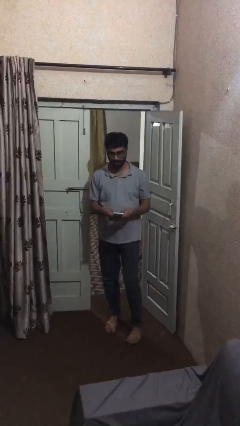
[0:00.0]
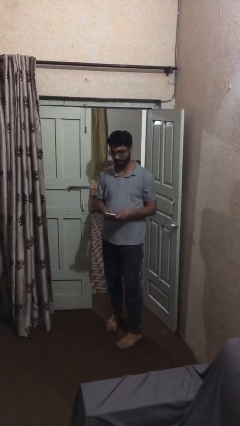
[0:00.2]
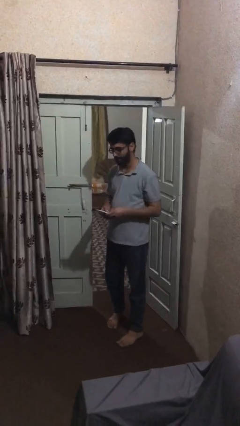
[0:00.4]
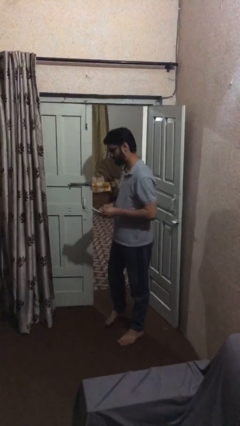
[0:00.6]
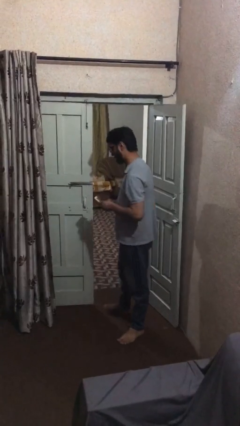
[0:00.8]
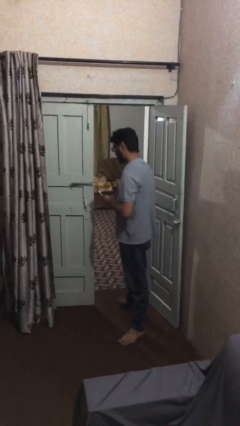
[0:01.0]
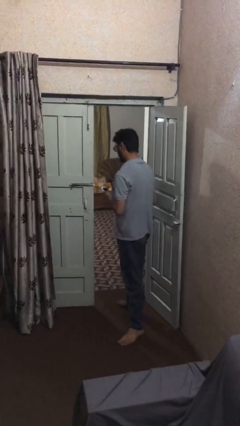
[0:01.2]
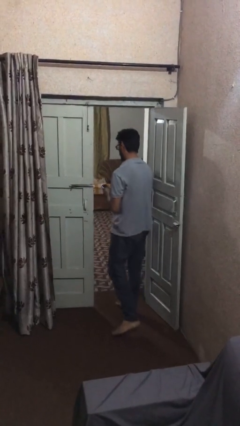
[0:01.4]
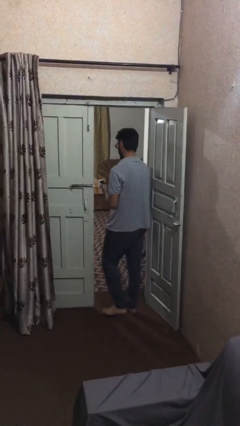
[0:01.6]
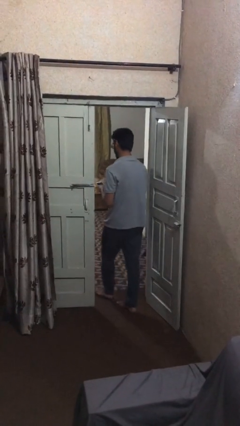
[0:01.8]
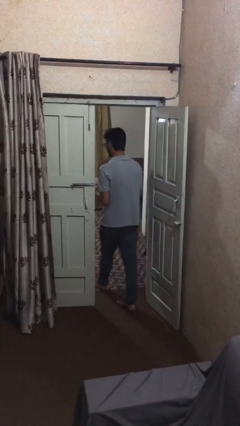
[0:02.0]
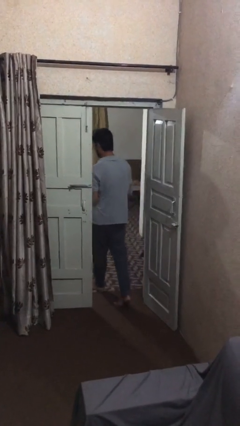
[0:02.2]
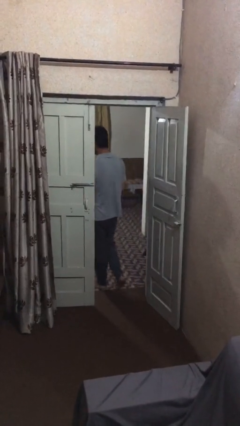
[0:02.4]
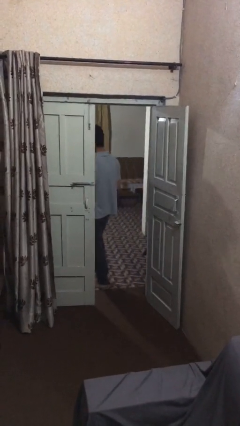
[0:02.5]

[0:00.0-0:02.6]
person exits scene through structure

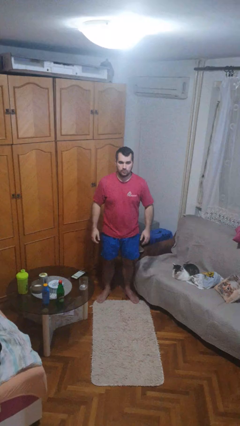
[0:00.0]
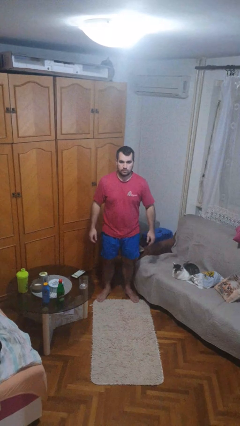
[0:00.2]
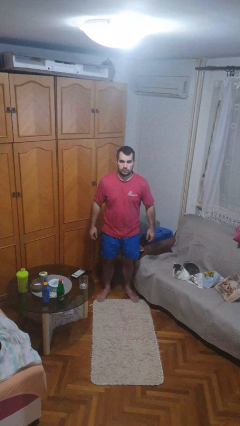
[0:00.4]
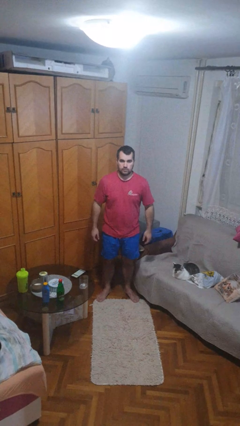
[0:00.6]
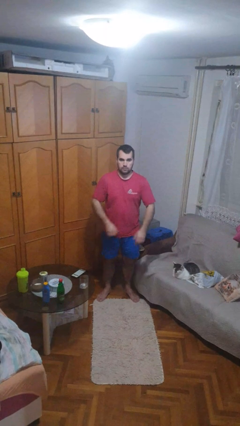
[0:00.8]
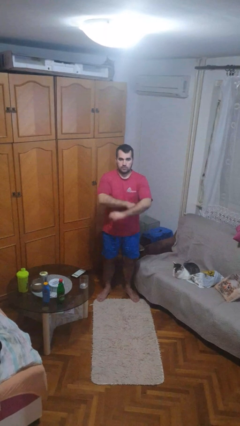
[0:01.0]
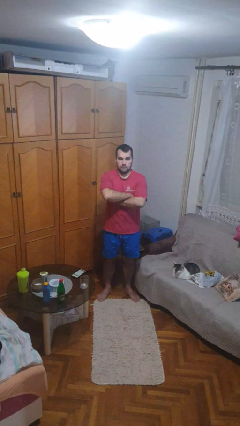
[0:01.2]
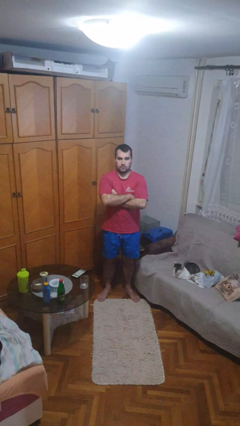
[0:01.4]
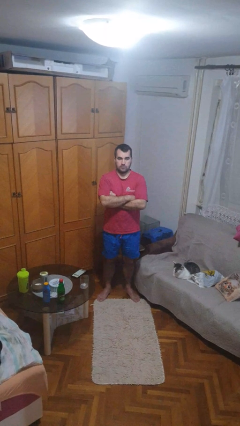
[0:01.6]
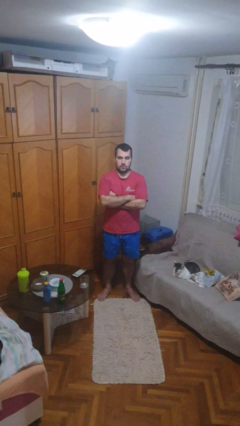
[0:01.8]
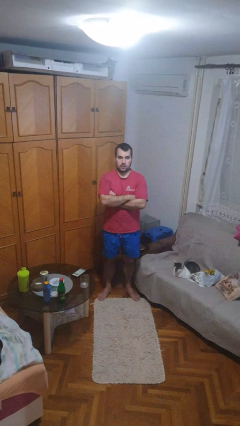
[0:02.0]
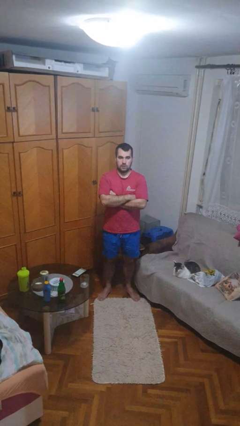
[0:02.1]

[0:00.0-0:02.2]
person crosses arms

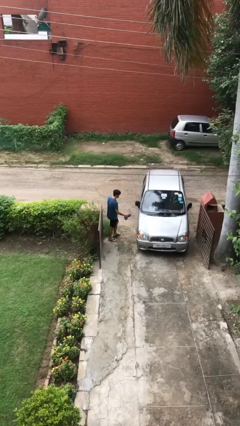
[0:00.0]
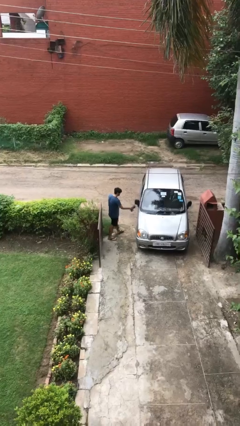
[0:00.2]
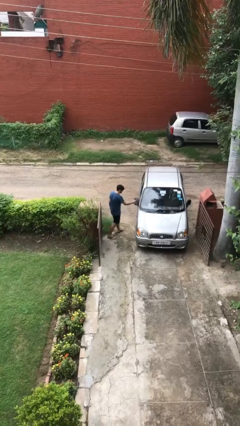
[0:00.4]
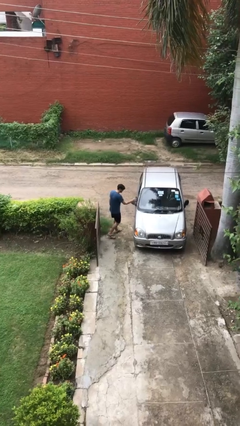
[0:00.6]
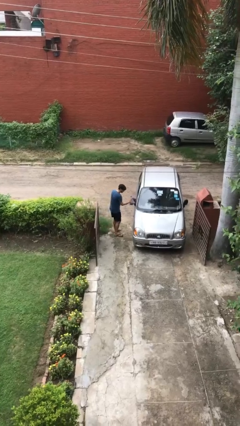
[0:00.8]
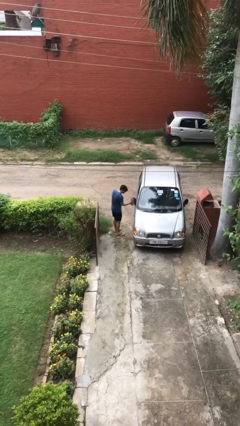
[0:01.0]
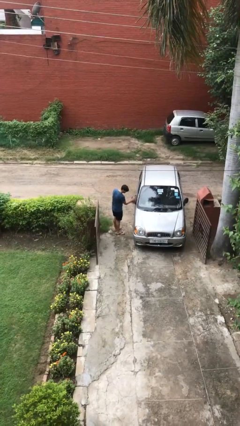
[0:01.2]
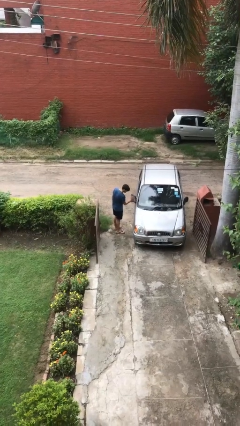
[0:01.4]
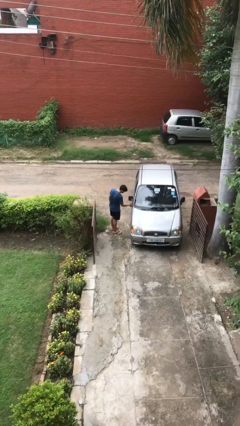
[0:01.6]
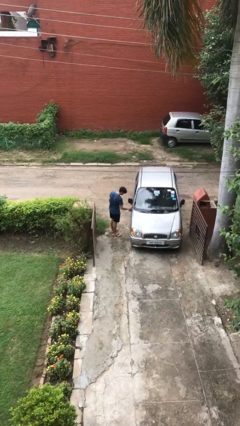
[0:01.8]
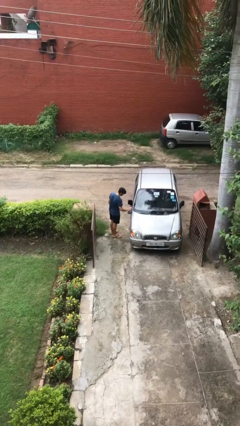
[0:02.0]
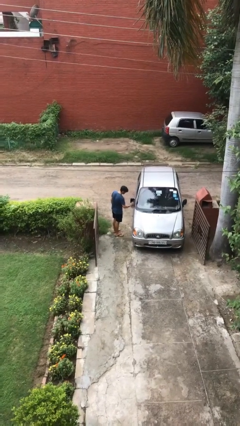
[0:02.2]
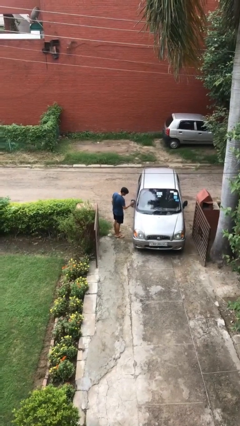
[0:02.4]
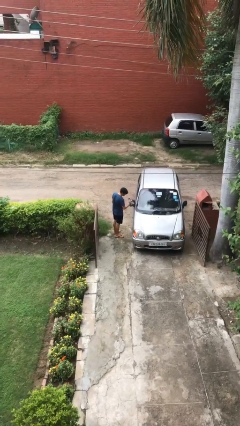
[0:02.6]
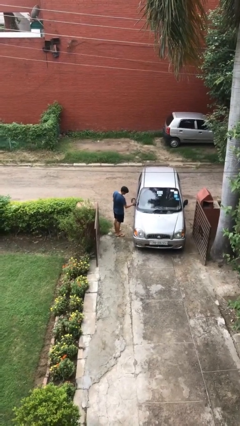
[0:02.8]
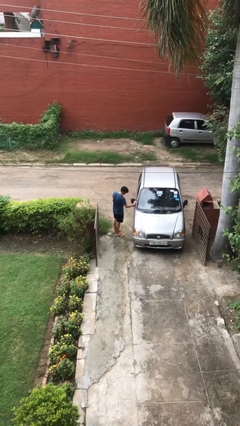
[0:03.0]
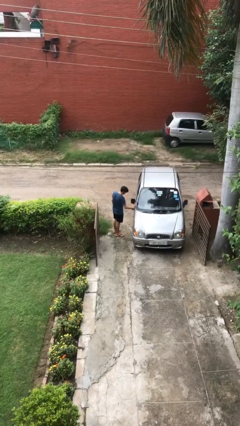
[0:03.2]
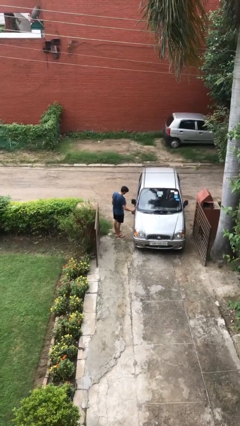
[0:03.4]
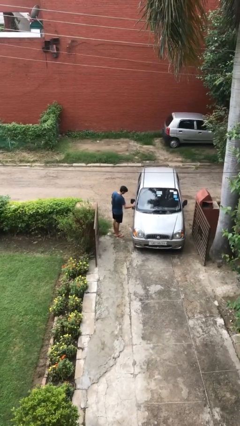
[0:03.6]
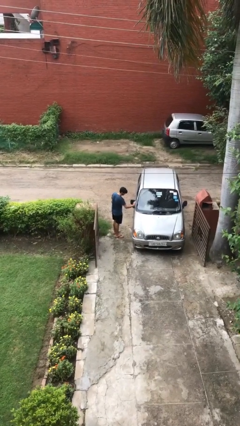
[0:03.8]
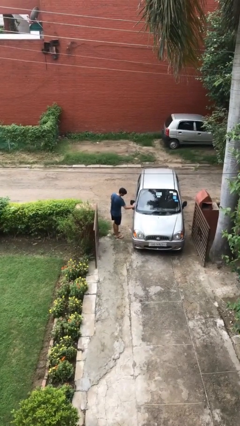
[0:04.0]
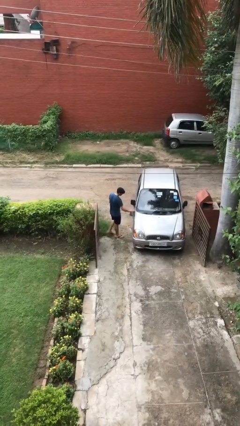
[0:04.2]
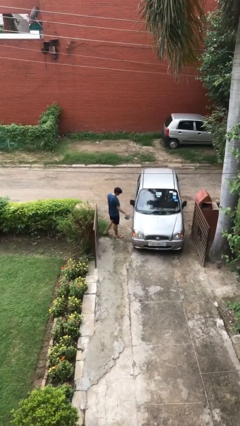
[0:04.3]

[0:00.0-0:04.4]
person polishes car with rag

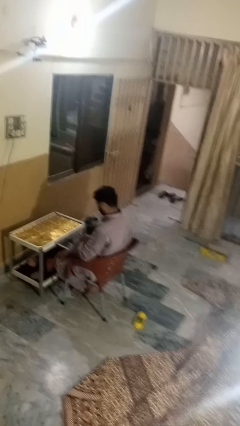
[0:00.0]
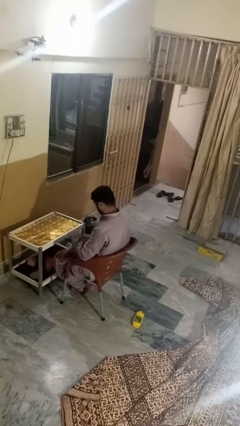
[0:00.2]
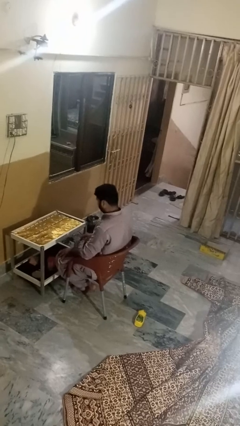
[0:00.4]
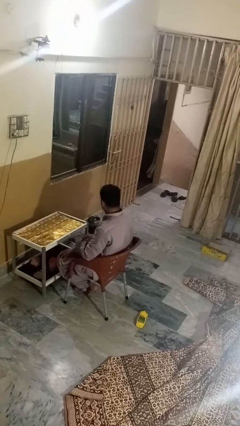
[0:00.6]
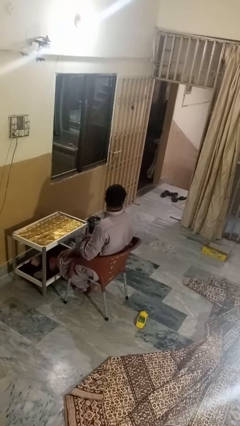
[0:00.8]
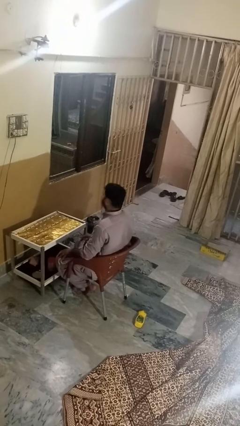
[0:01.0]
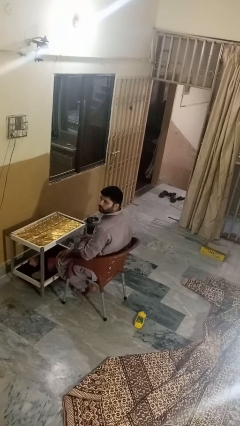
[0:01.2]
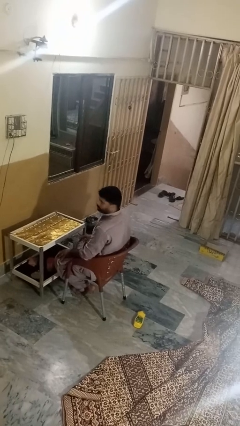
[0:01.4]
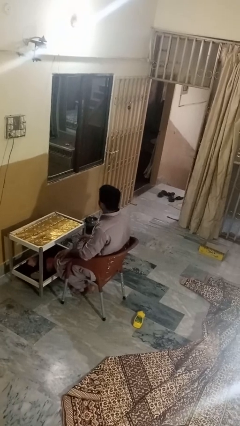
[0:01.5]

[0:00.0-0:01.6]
person shakes head

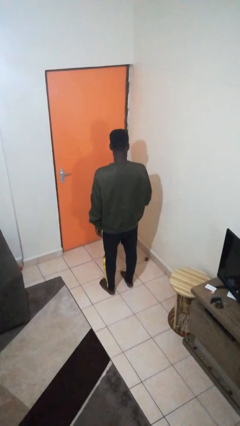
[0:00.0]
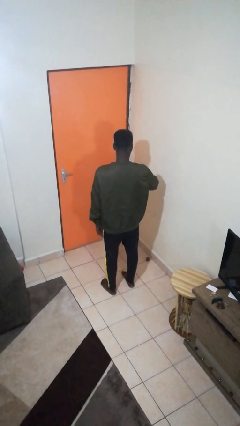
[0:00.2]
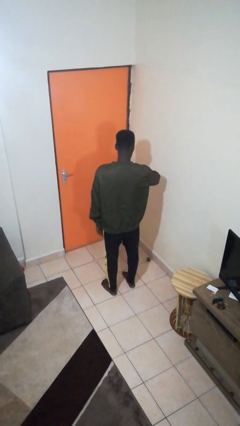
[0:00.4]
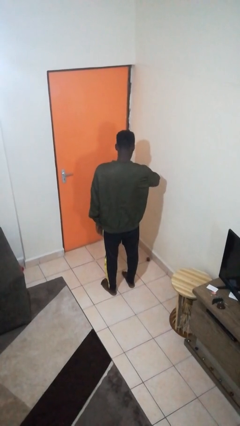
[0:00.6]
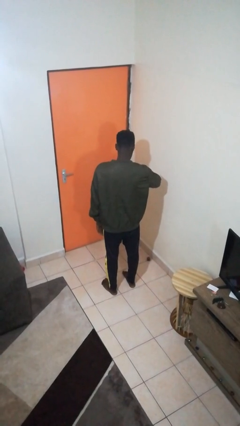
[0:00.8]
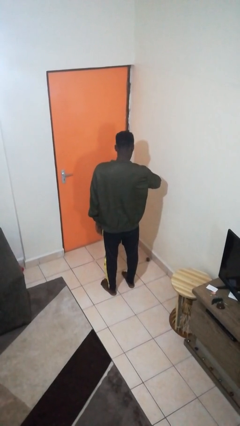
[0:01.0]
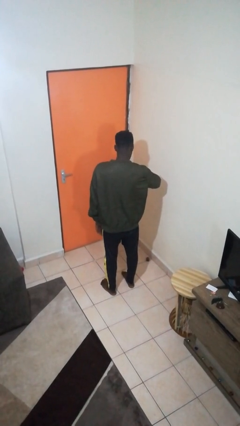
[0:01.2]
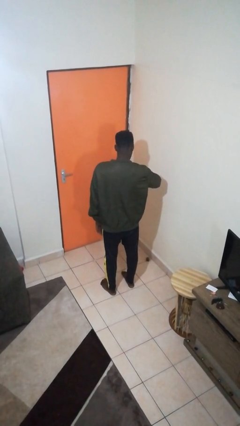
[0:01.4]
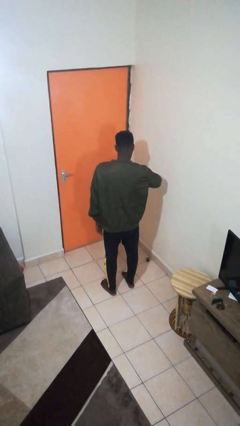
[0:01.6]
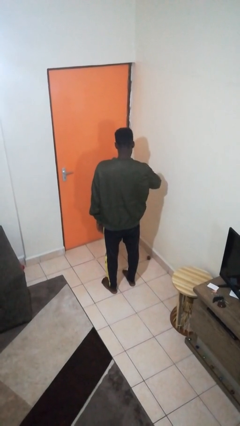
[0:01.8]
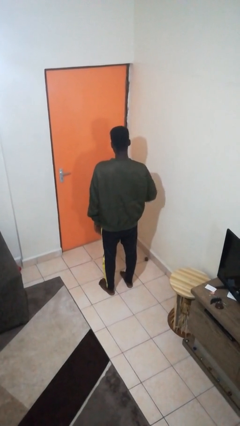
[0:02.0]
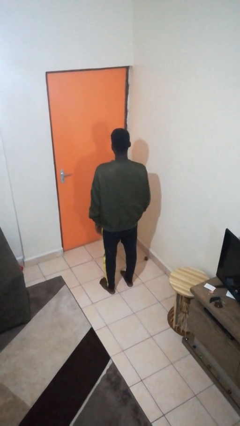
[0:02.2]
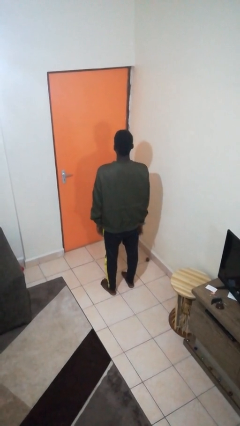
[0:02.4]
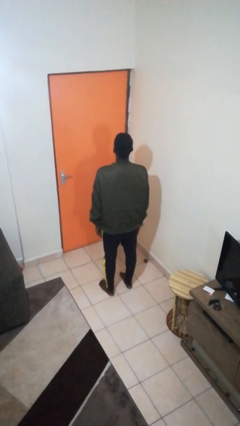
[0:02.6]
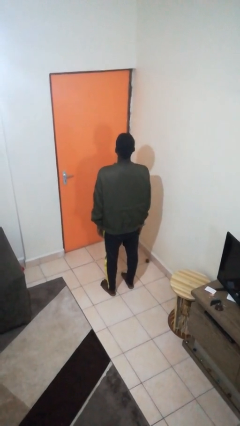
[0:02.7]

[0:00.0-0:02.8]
person looks at wristwatch

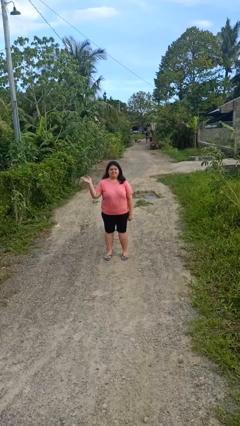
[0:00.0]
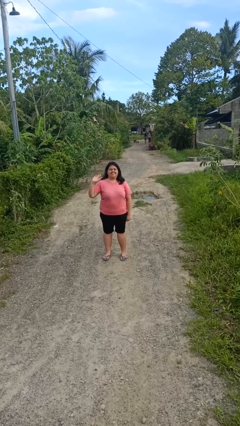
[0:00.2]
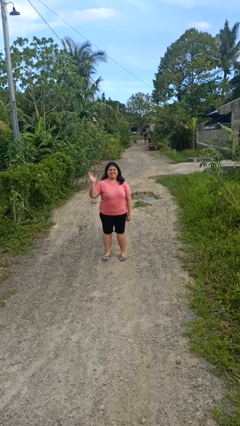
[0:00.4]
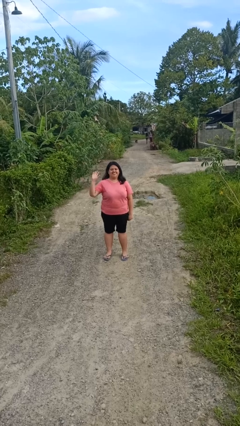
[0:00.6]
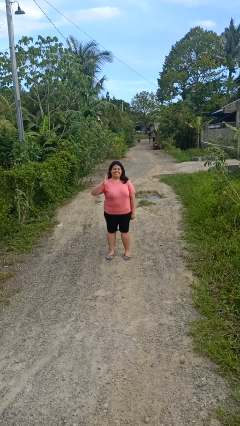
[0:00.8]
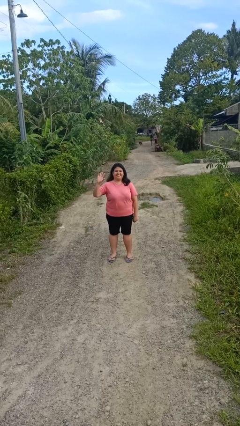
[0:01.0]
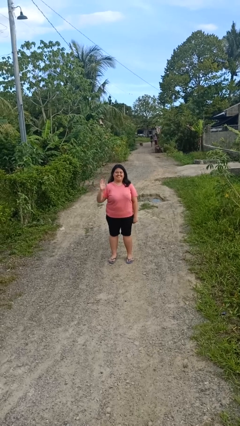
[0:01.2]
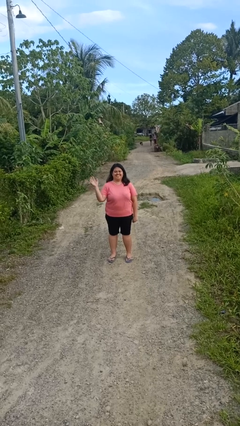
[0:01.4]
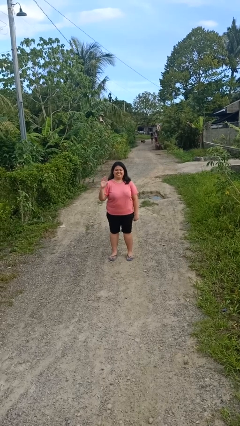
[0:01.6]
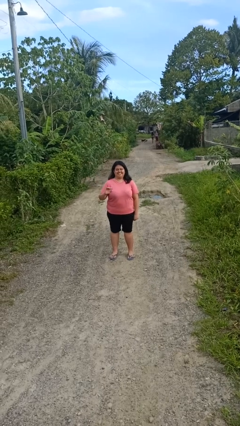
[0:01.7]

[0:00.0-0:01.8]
person waves at person

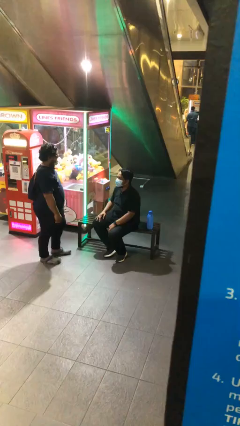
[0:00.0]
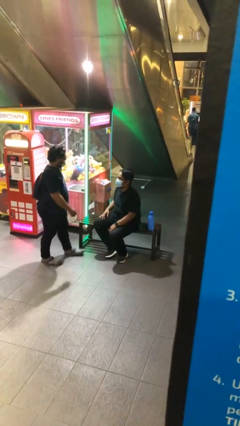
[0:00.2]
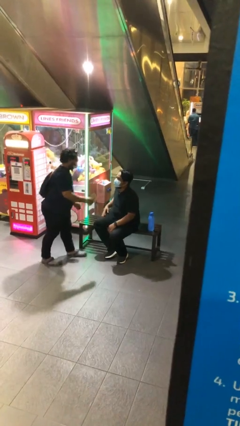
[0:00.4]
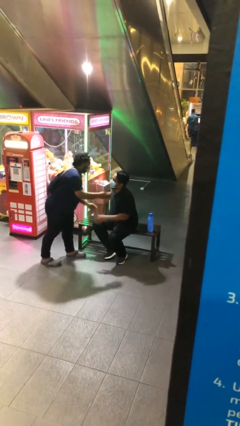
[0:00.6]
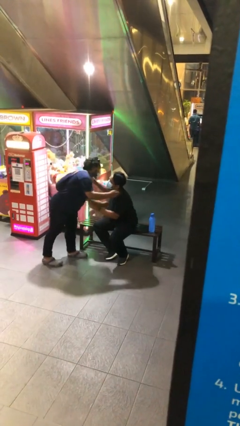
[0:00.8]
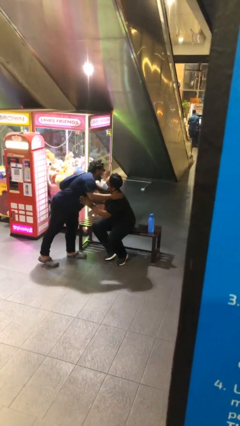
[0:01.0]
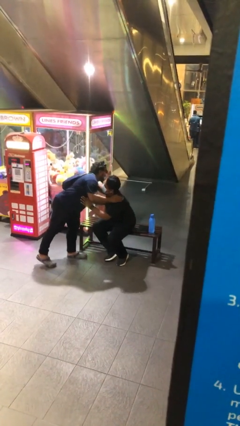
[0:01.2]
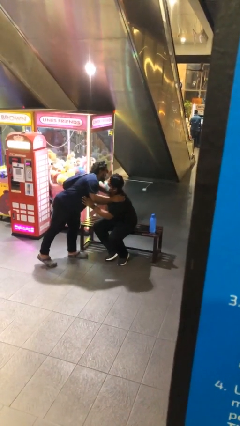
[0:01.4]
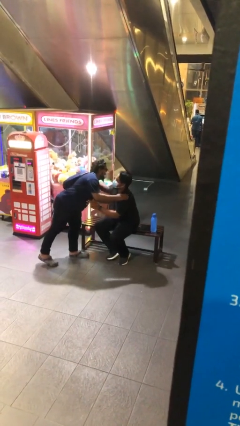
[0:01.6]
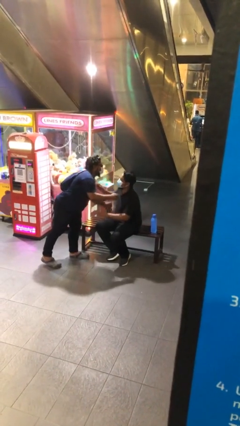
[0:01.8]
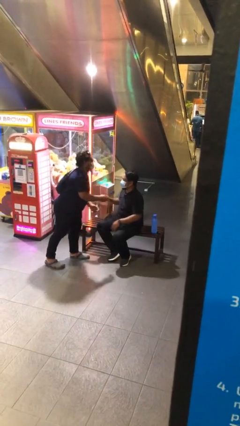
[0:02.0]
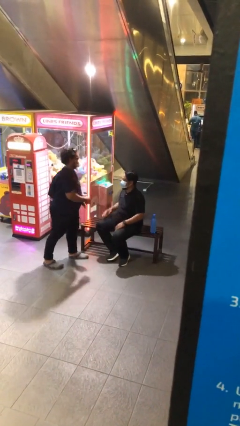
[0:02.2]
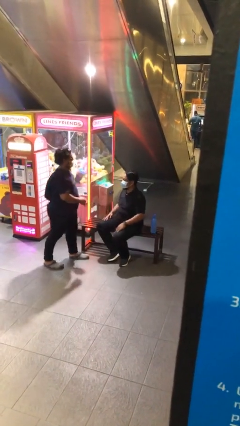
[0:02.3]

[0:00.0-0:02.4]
person embraces person
